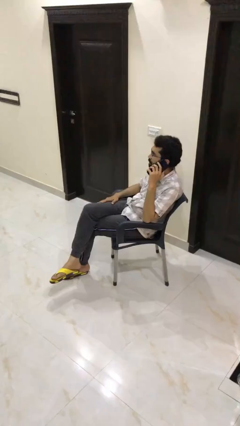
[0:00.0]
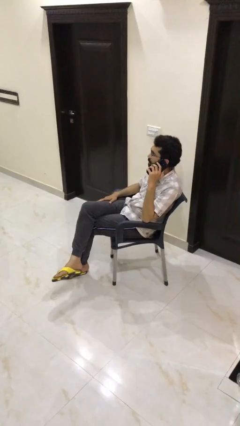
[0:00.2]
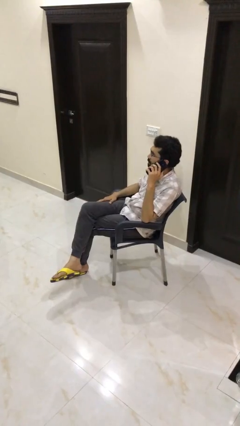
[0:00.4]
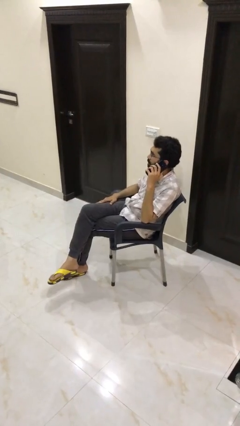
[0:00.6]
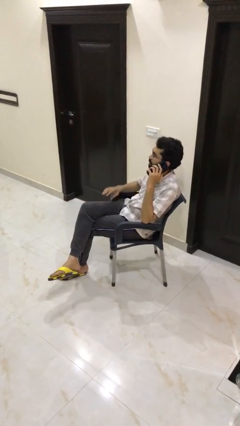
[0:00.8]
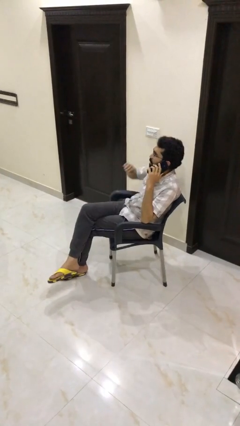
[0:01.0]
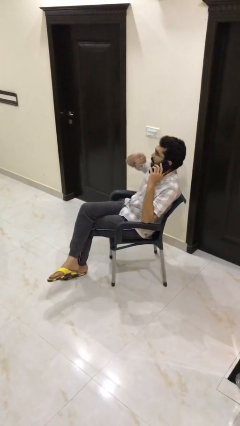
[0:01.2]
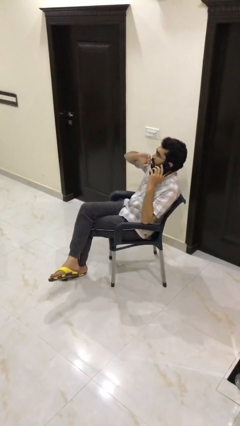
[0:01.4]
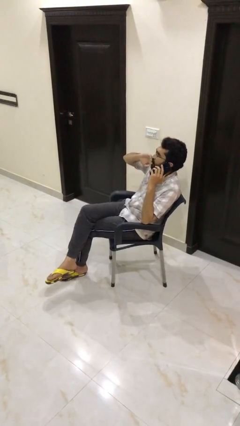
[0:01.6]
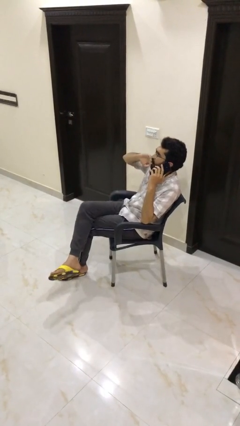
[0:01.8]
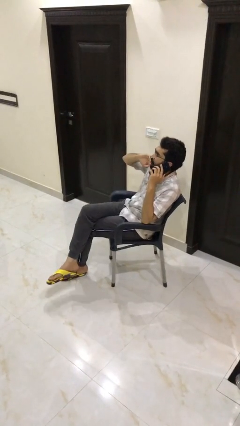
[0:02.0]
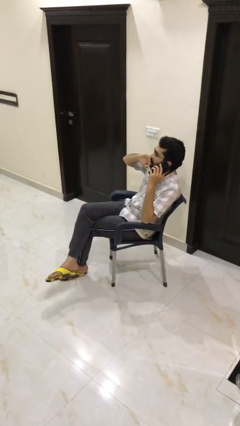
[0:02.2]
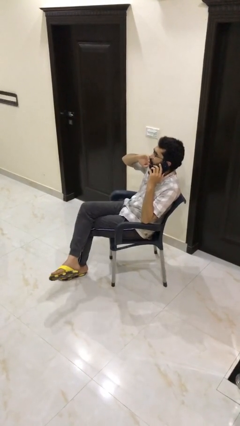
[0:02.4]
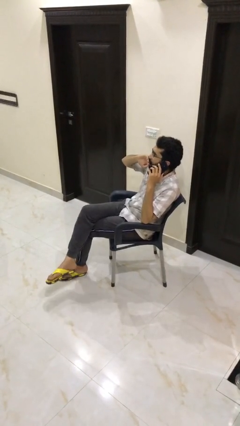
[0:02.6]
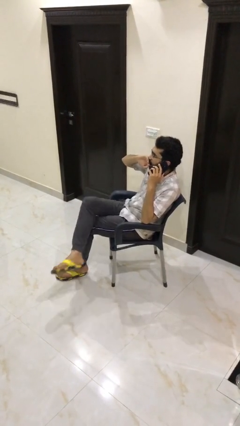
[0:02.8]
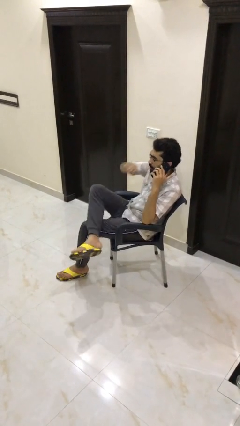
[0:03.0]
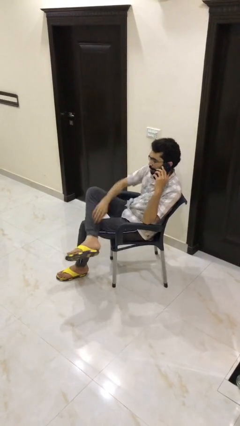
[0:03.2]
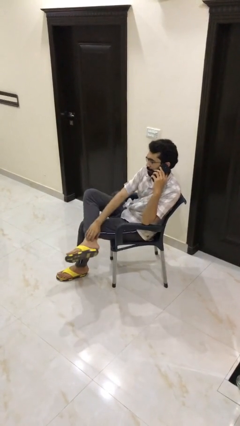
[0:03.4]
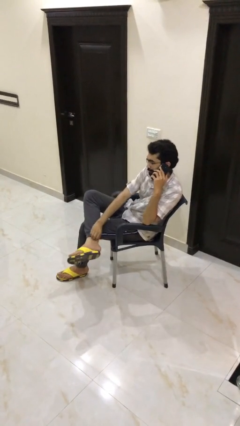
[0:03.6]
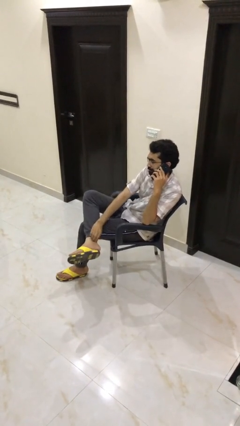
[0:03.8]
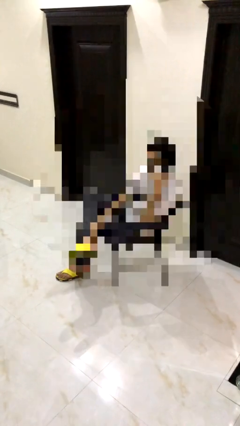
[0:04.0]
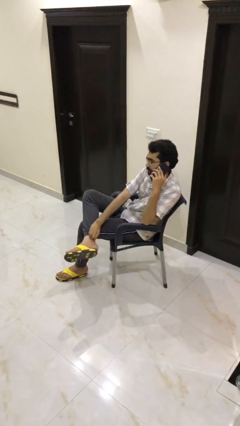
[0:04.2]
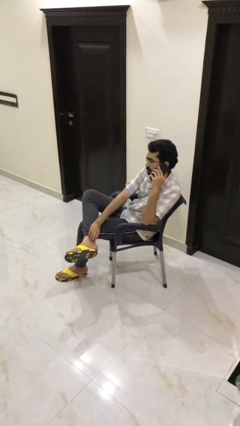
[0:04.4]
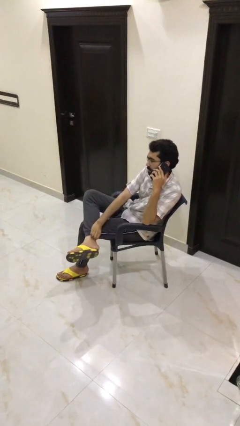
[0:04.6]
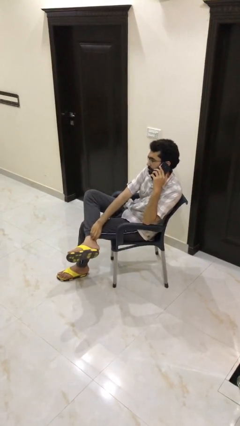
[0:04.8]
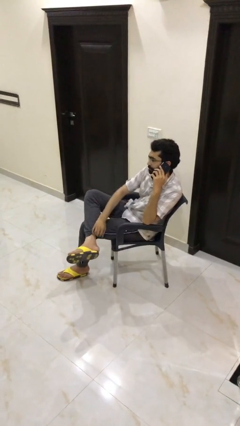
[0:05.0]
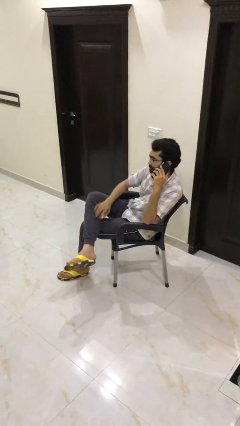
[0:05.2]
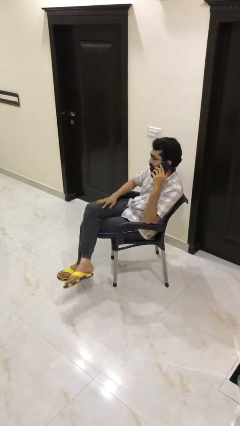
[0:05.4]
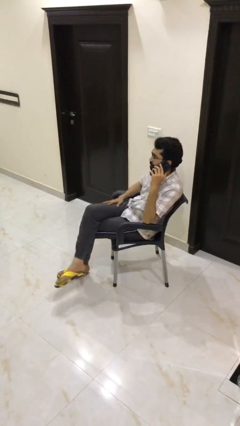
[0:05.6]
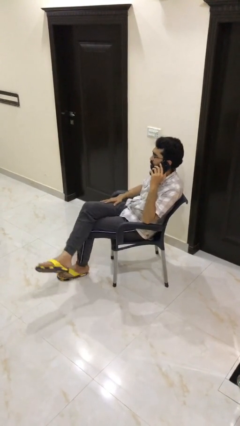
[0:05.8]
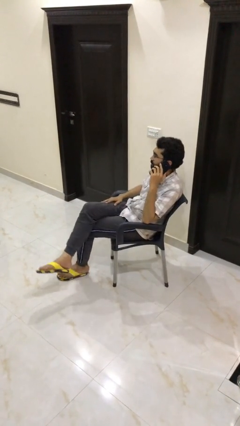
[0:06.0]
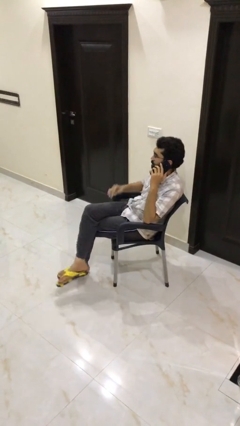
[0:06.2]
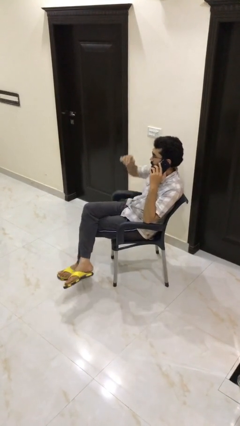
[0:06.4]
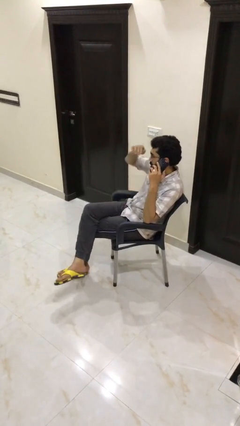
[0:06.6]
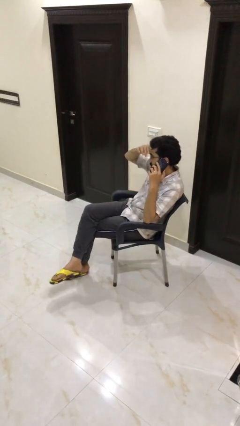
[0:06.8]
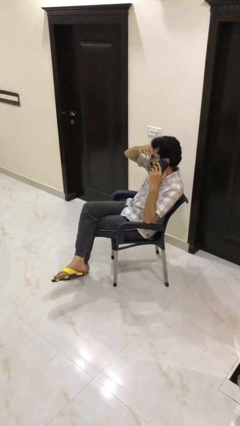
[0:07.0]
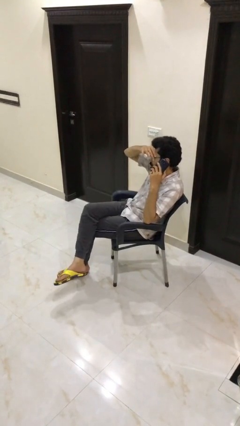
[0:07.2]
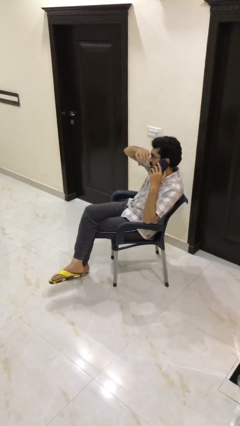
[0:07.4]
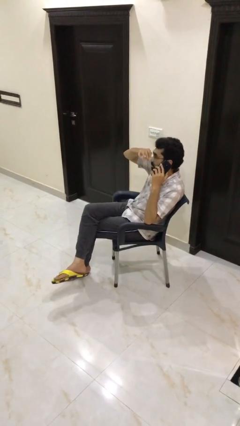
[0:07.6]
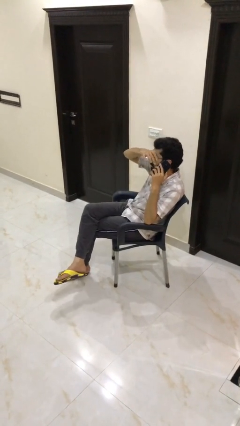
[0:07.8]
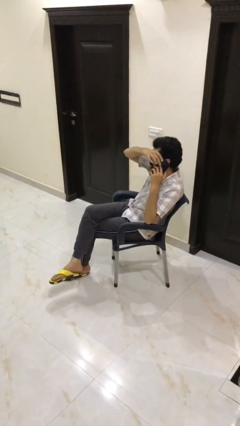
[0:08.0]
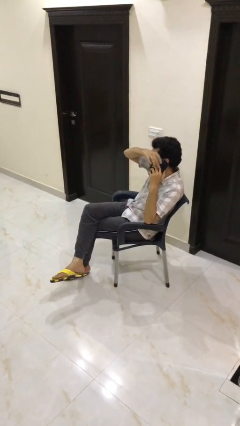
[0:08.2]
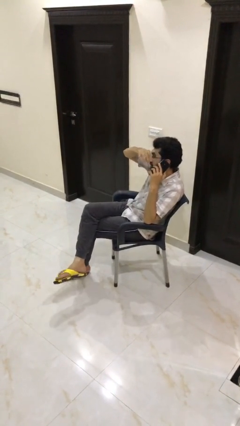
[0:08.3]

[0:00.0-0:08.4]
person talks on phone

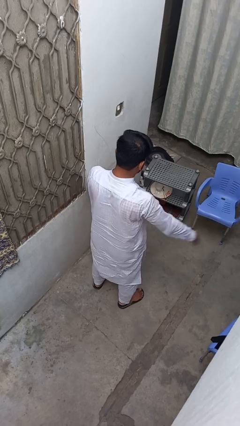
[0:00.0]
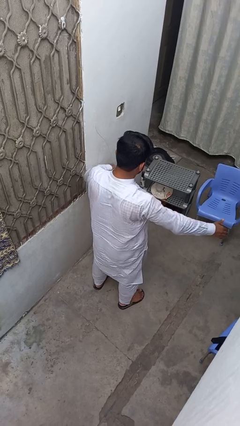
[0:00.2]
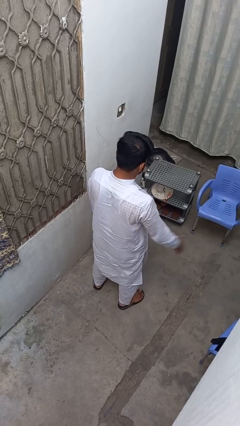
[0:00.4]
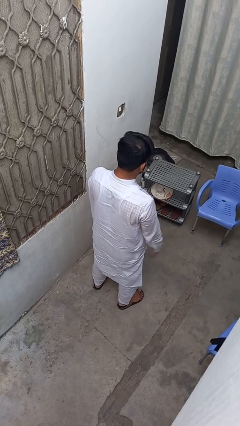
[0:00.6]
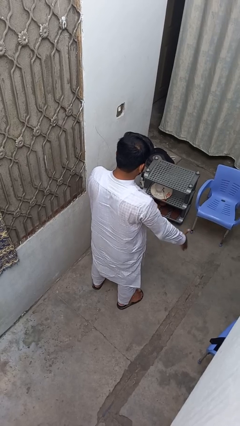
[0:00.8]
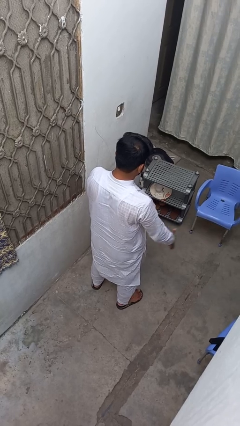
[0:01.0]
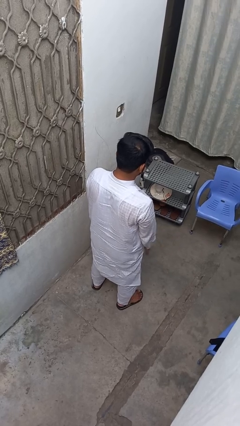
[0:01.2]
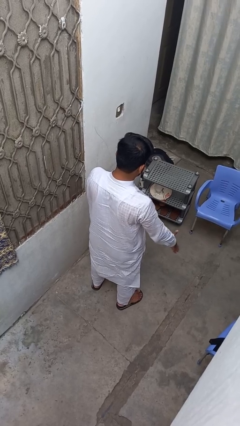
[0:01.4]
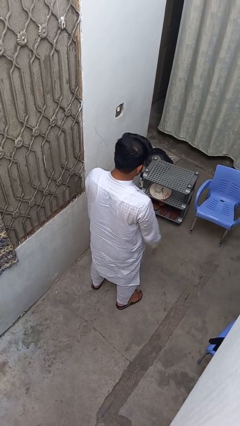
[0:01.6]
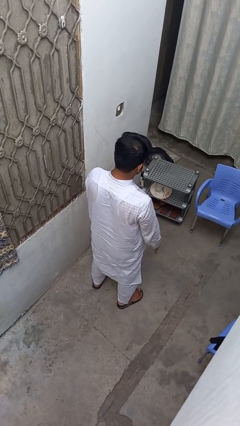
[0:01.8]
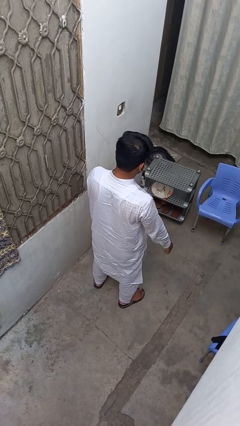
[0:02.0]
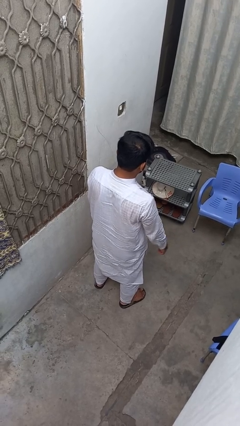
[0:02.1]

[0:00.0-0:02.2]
person slaps hands on thighs

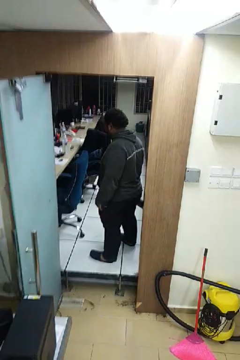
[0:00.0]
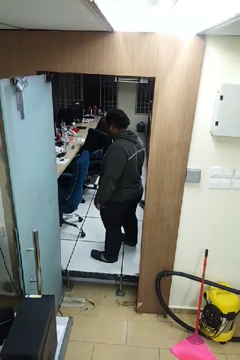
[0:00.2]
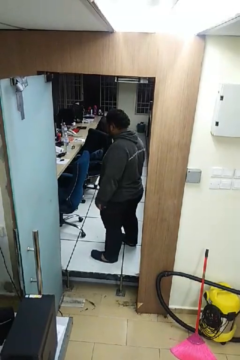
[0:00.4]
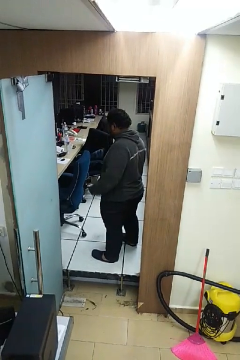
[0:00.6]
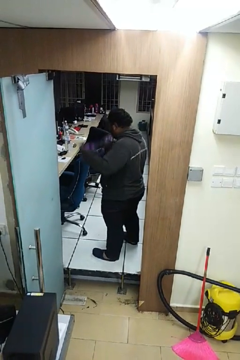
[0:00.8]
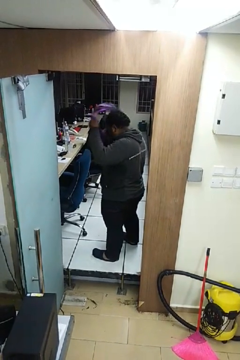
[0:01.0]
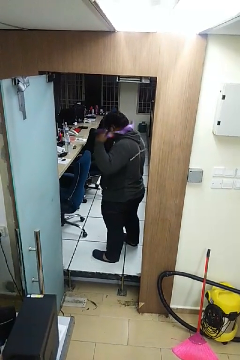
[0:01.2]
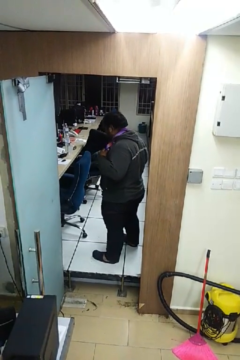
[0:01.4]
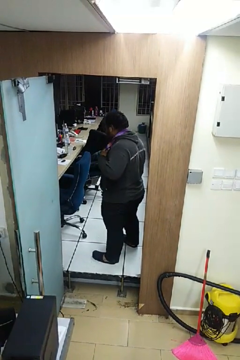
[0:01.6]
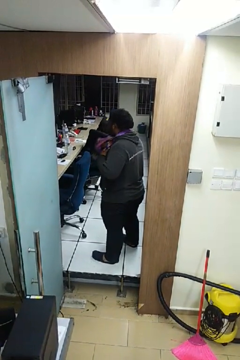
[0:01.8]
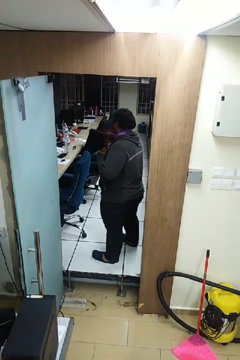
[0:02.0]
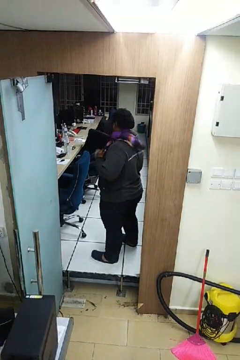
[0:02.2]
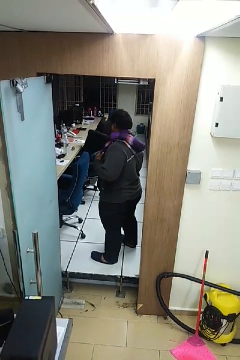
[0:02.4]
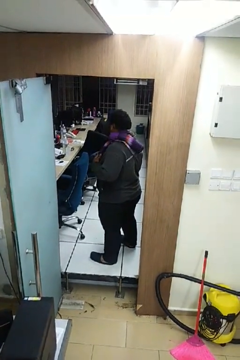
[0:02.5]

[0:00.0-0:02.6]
person puts on scarf

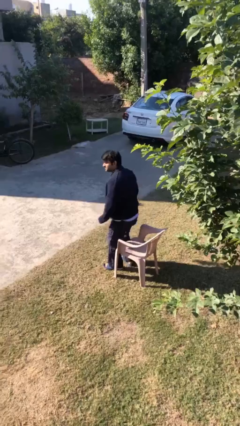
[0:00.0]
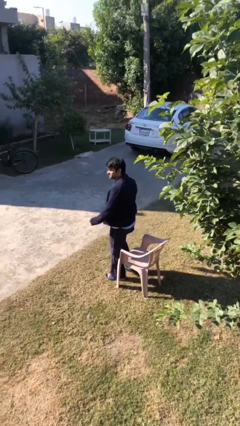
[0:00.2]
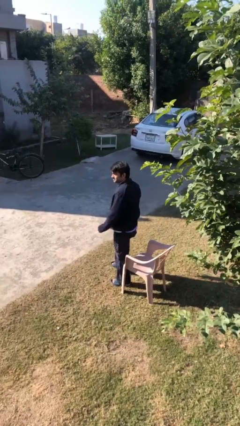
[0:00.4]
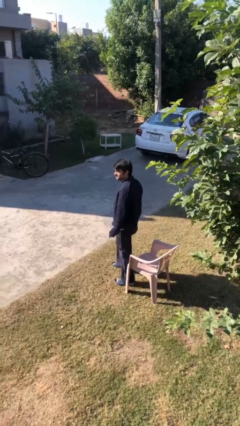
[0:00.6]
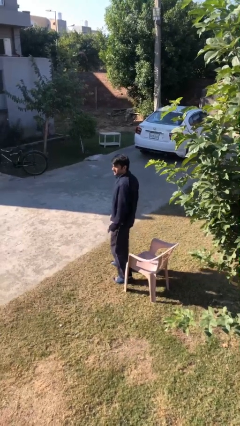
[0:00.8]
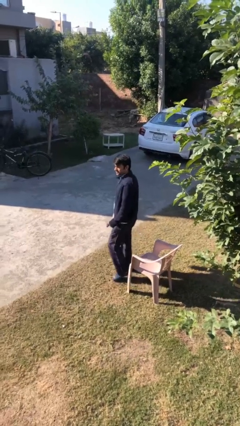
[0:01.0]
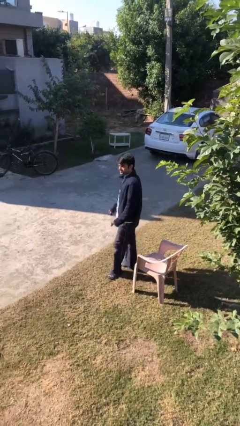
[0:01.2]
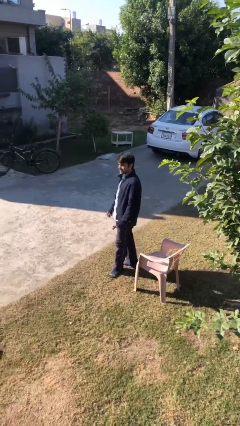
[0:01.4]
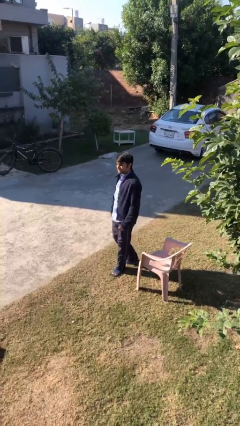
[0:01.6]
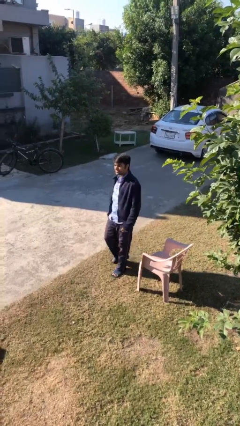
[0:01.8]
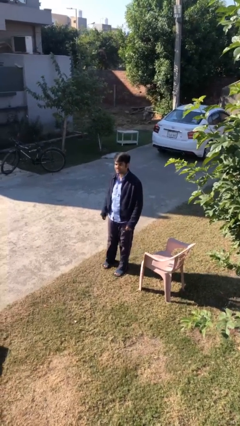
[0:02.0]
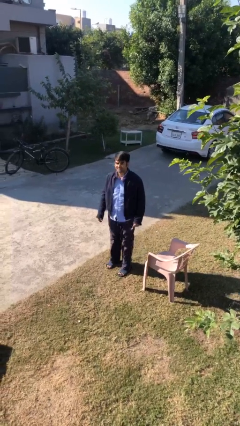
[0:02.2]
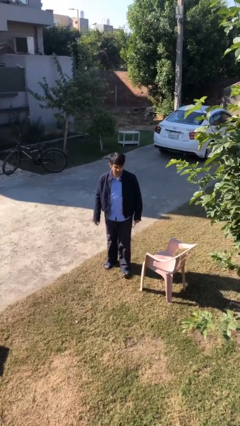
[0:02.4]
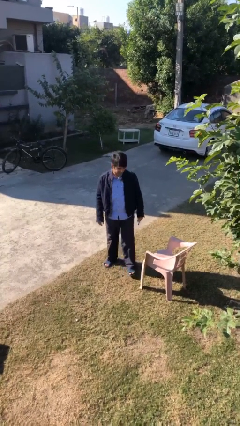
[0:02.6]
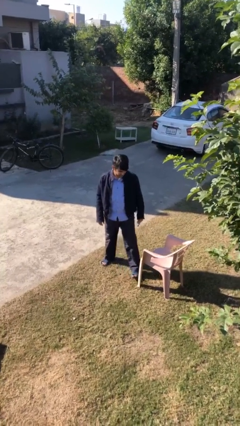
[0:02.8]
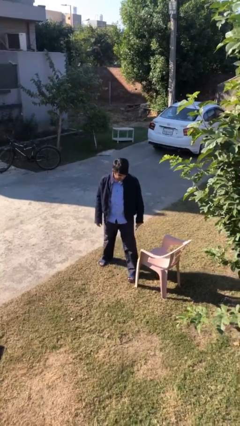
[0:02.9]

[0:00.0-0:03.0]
person stands up

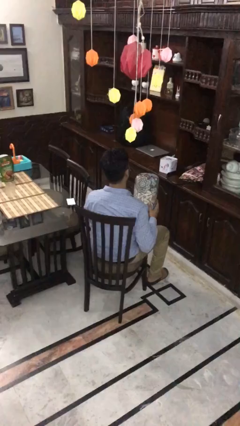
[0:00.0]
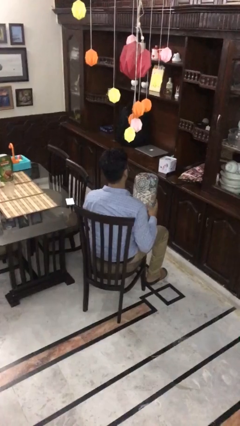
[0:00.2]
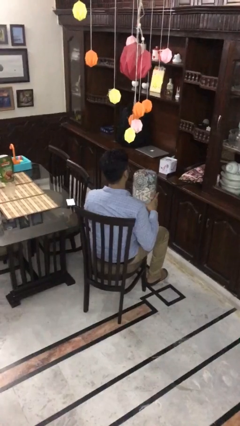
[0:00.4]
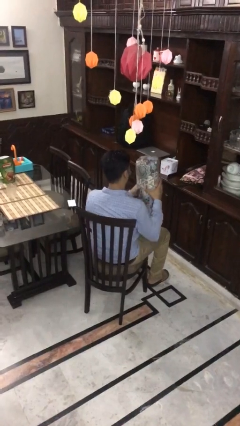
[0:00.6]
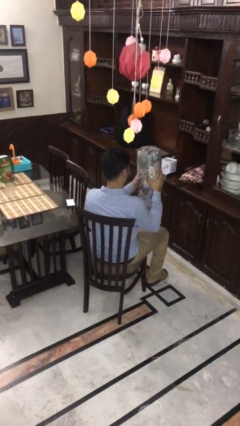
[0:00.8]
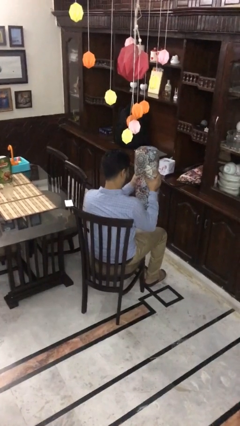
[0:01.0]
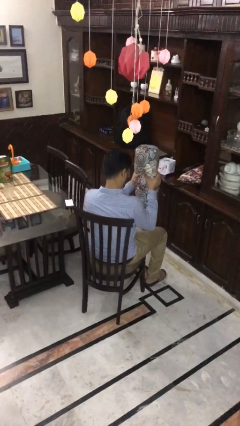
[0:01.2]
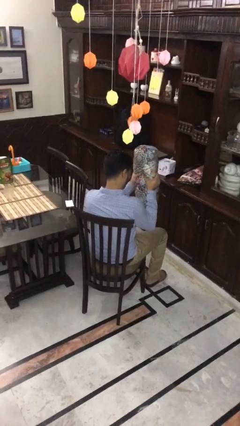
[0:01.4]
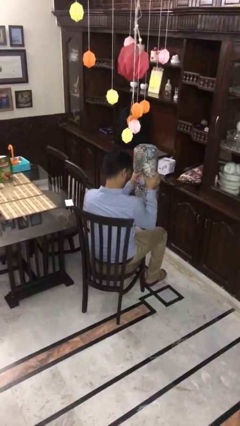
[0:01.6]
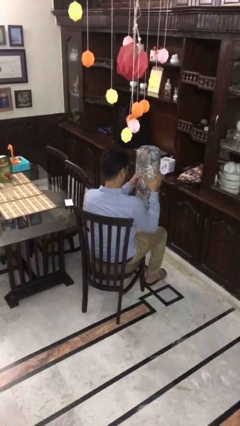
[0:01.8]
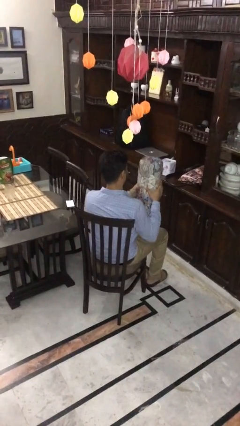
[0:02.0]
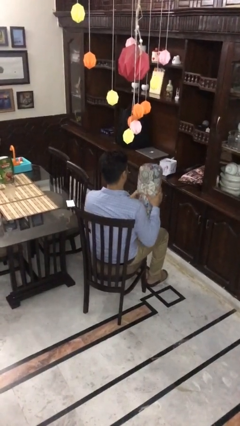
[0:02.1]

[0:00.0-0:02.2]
person squeezes object
